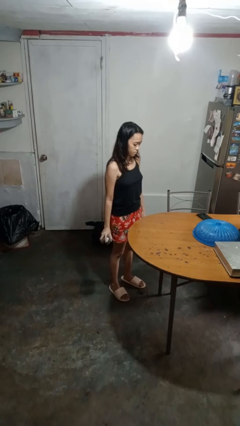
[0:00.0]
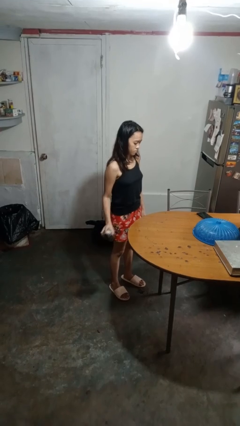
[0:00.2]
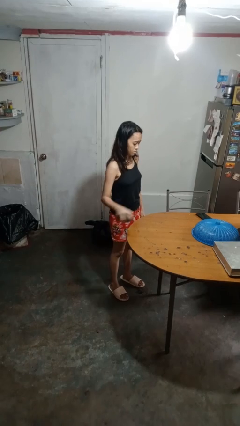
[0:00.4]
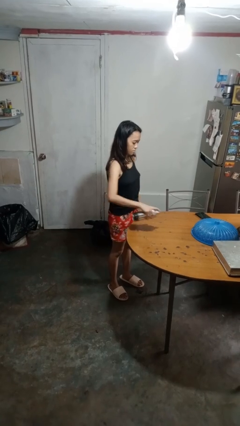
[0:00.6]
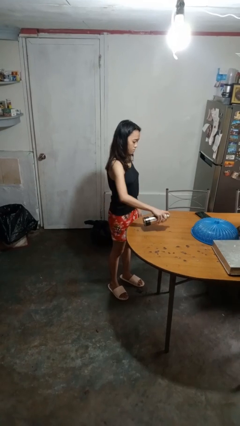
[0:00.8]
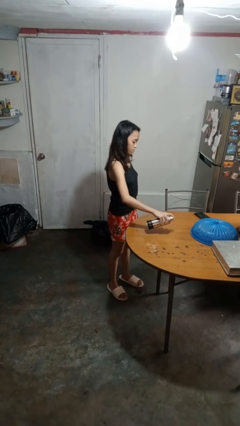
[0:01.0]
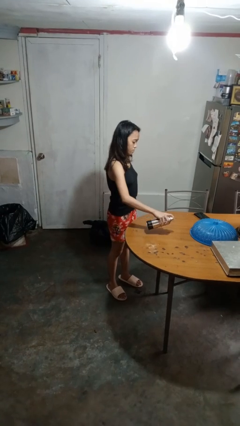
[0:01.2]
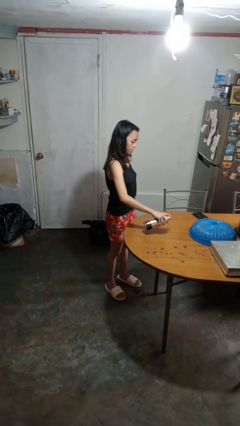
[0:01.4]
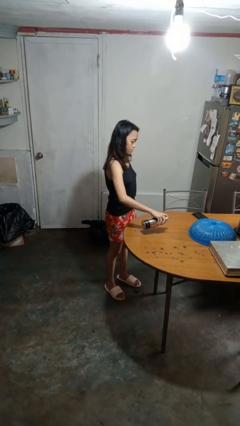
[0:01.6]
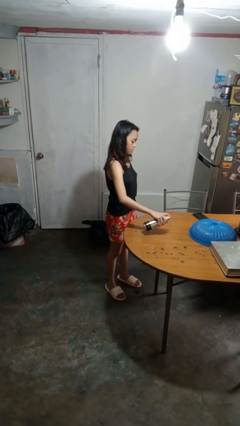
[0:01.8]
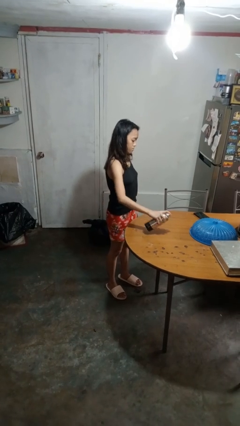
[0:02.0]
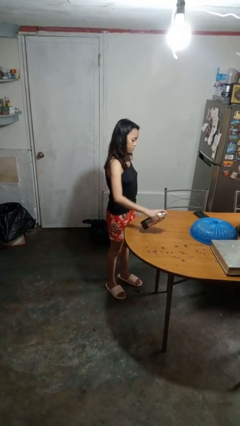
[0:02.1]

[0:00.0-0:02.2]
person sprays from bottle

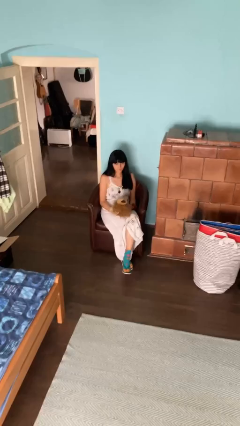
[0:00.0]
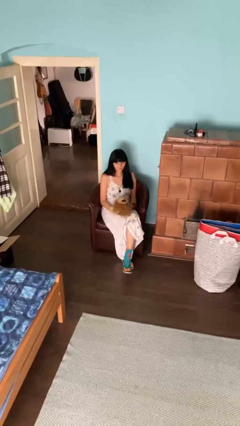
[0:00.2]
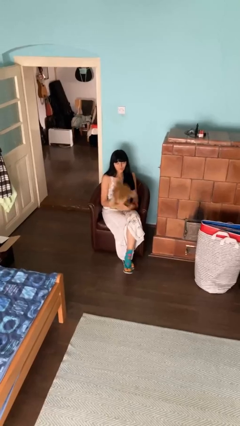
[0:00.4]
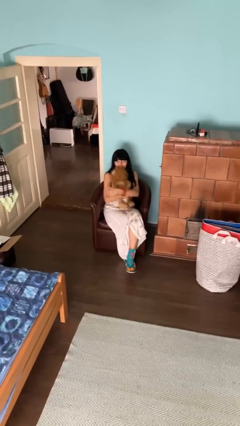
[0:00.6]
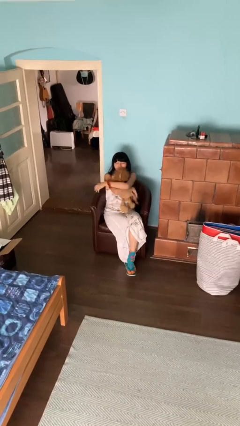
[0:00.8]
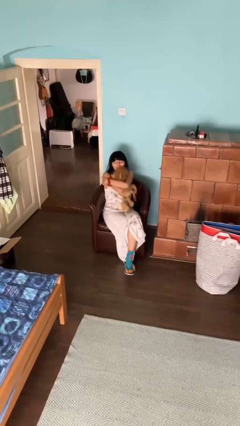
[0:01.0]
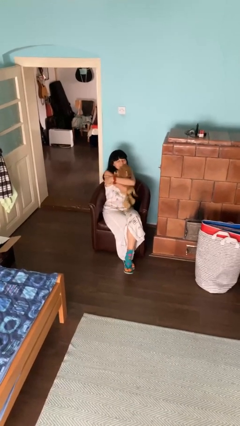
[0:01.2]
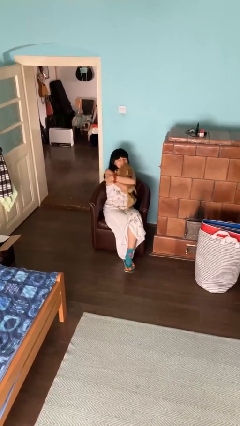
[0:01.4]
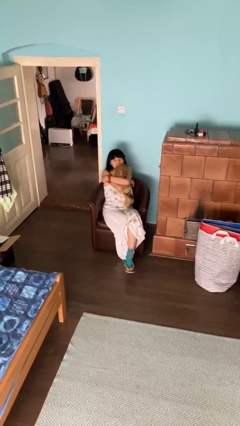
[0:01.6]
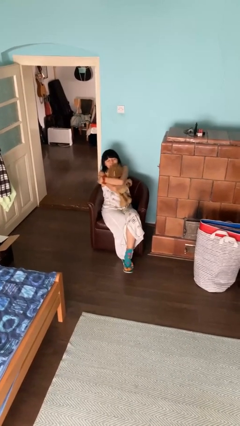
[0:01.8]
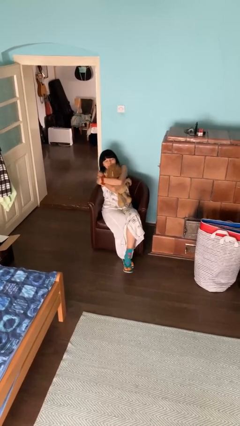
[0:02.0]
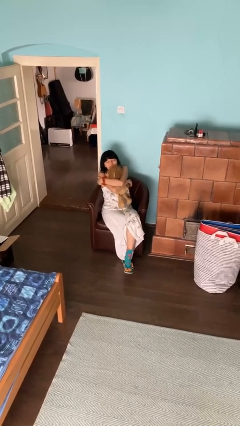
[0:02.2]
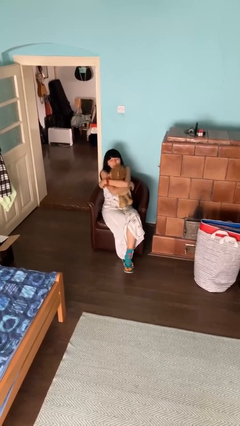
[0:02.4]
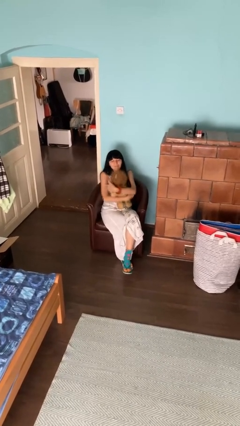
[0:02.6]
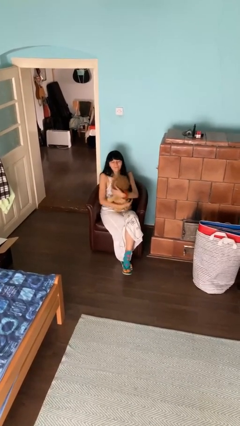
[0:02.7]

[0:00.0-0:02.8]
person hugs stuffed animal

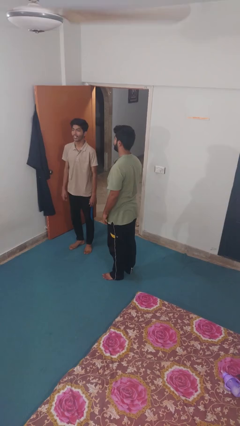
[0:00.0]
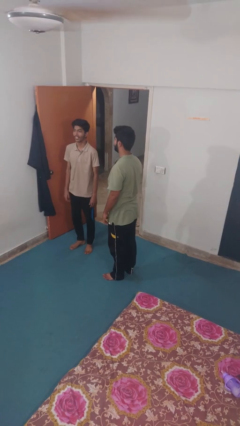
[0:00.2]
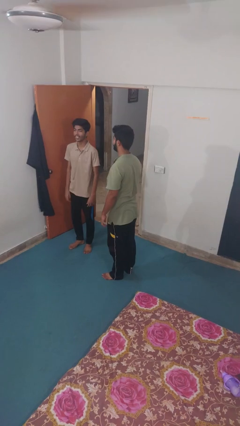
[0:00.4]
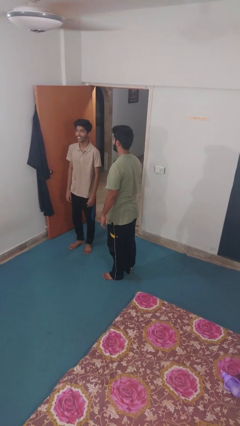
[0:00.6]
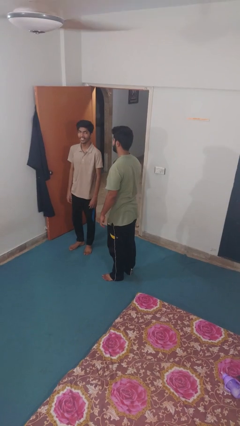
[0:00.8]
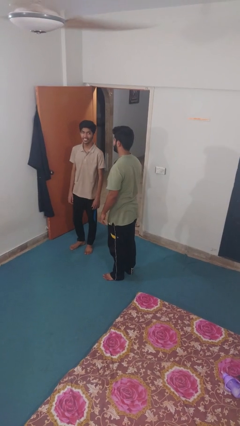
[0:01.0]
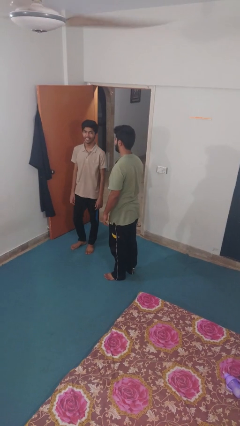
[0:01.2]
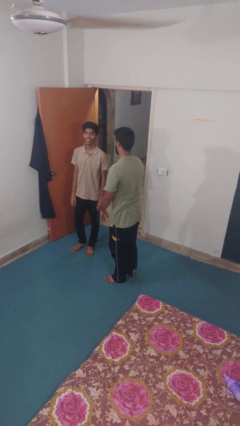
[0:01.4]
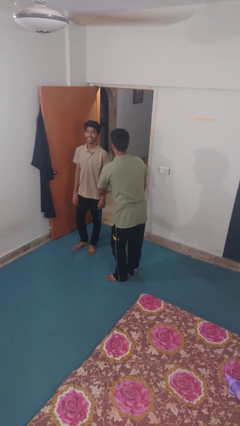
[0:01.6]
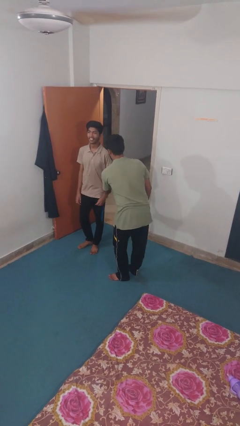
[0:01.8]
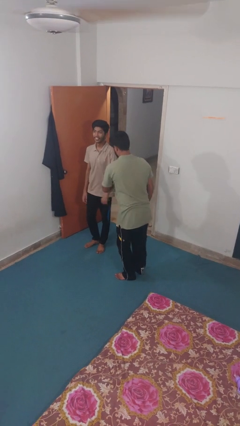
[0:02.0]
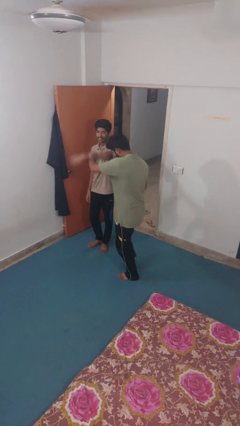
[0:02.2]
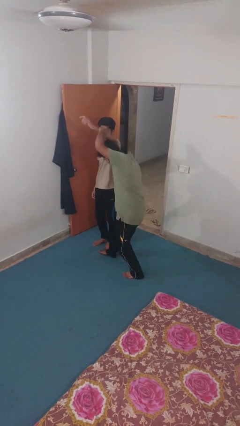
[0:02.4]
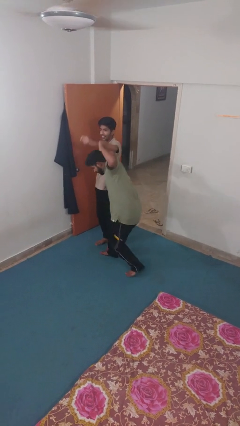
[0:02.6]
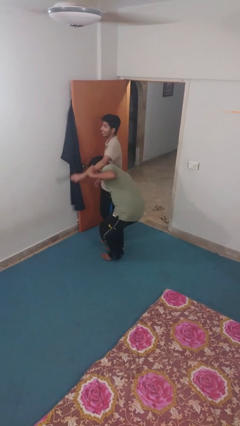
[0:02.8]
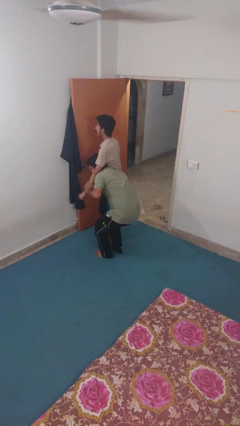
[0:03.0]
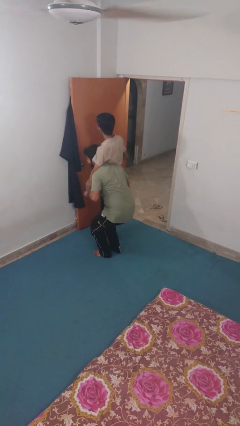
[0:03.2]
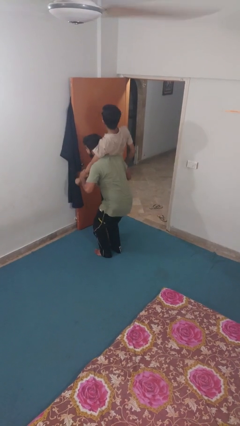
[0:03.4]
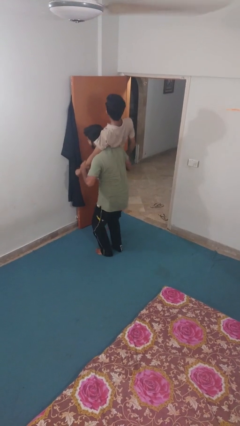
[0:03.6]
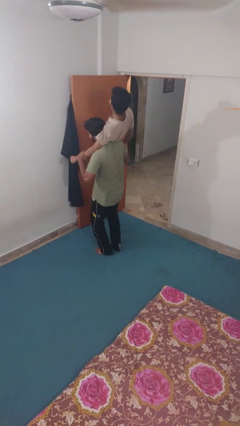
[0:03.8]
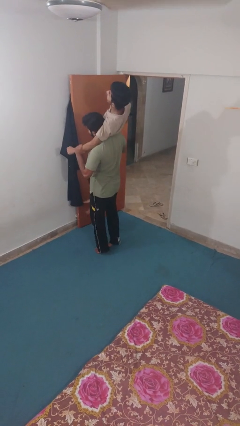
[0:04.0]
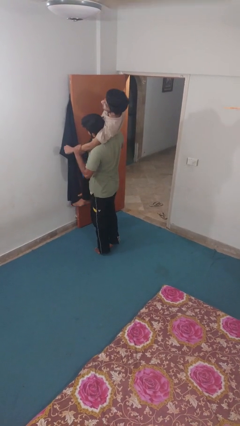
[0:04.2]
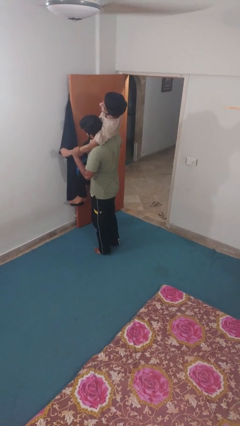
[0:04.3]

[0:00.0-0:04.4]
person carries person over shoulder

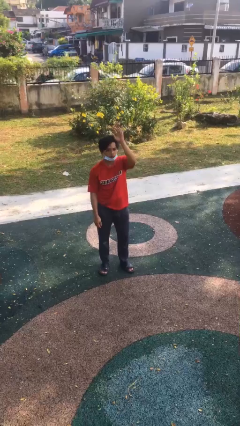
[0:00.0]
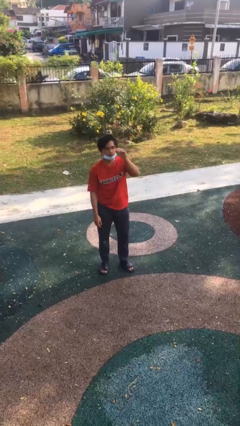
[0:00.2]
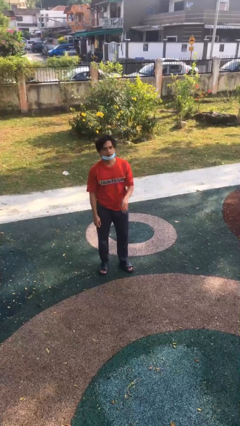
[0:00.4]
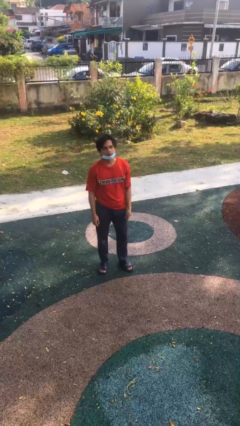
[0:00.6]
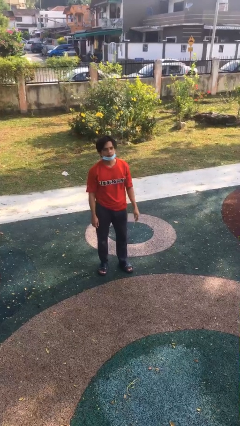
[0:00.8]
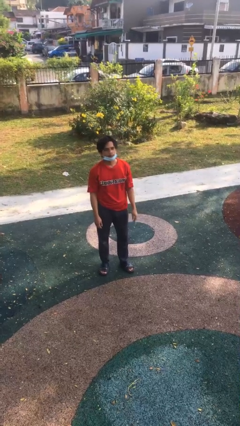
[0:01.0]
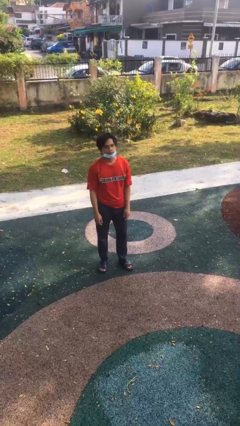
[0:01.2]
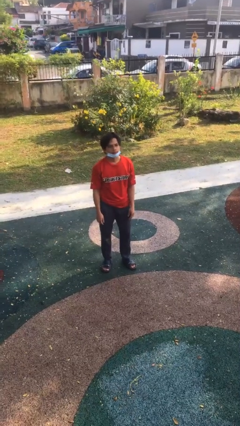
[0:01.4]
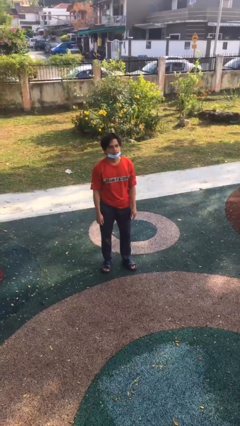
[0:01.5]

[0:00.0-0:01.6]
person gestures lower hand

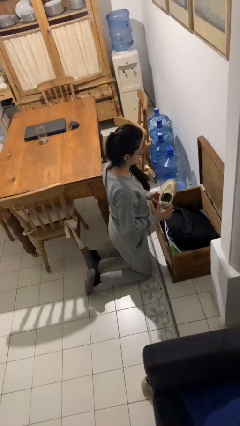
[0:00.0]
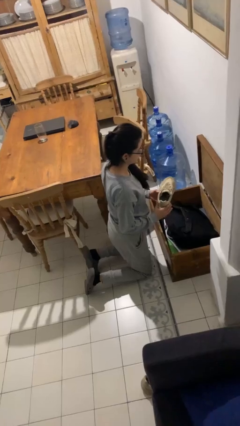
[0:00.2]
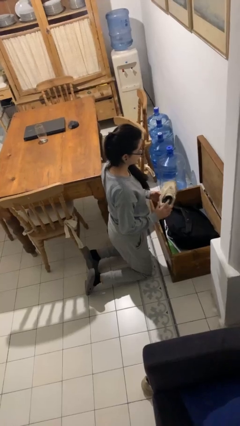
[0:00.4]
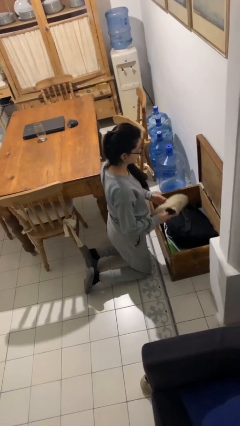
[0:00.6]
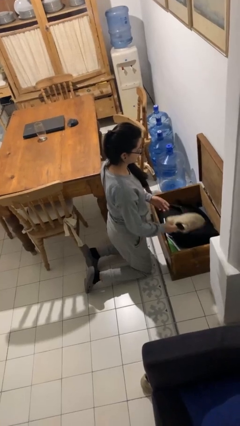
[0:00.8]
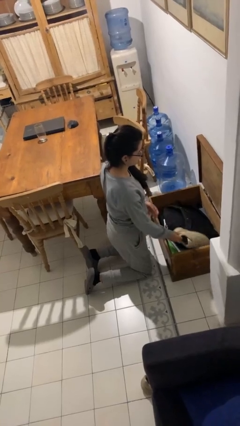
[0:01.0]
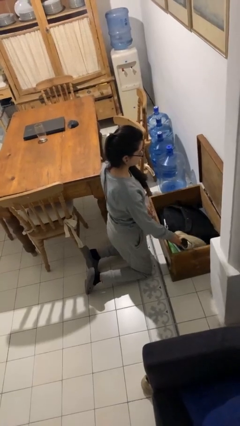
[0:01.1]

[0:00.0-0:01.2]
person puts object into box

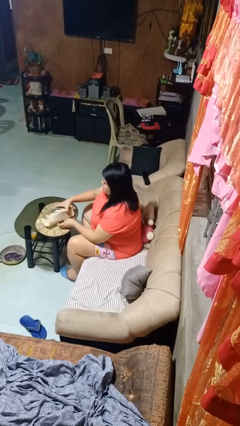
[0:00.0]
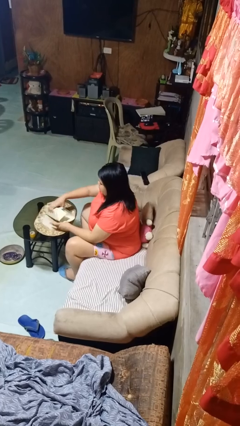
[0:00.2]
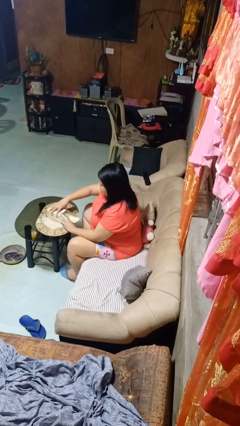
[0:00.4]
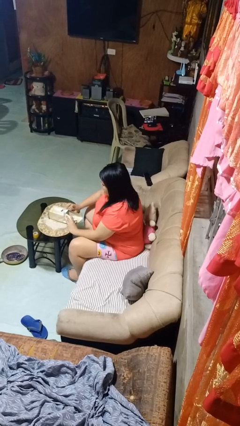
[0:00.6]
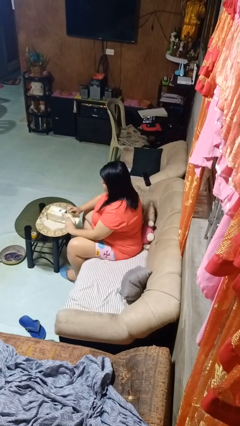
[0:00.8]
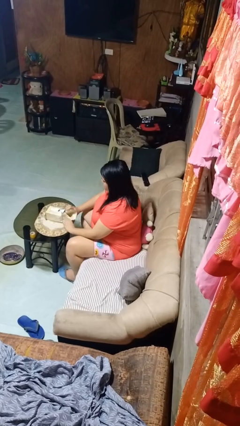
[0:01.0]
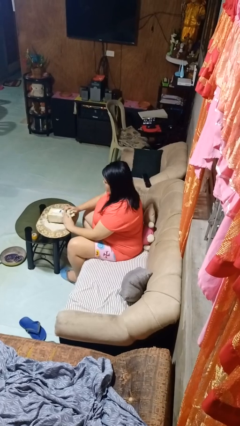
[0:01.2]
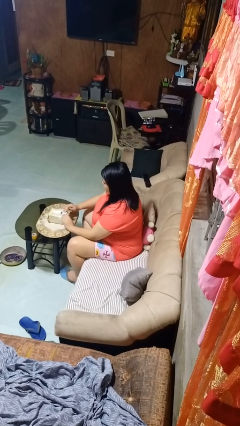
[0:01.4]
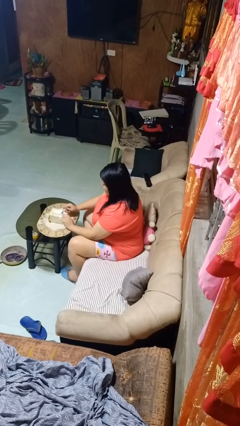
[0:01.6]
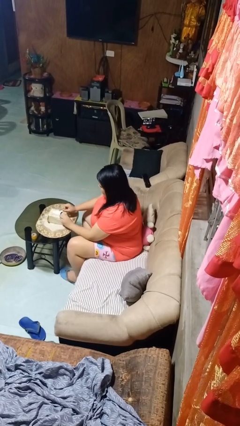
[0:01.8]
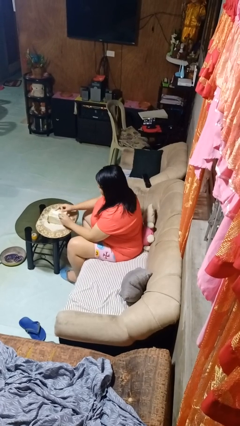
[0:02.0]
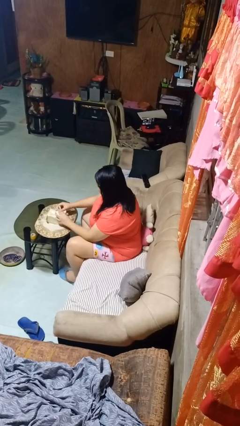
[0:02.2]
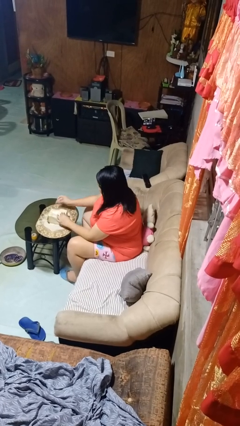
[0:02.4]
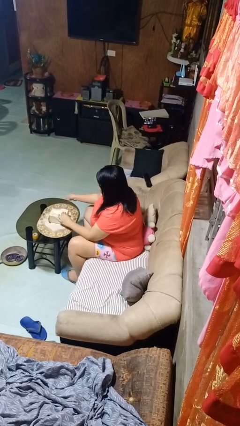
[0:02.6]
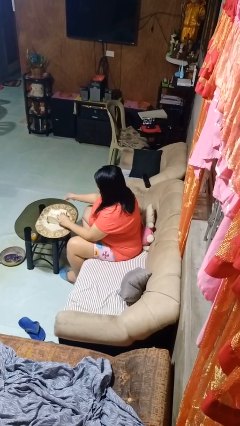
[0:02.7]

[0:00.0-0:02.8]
person wraps box

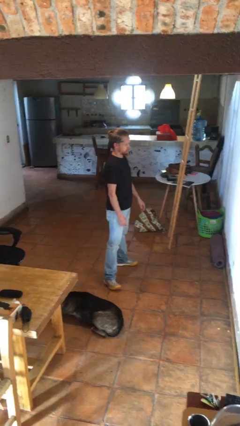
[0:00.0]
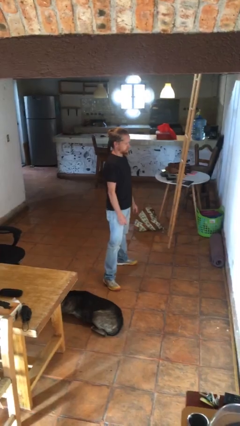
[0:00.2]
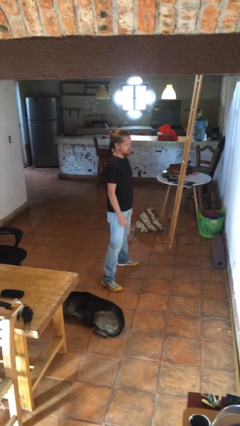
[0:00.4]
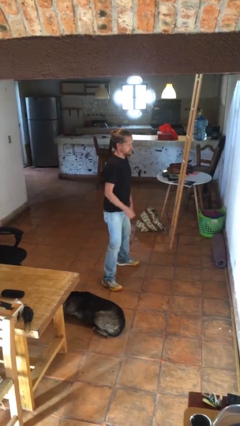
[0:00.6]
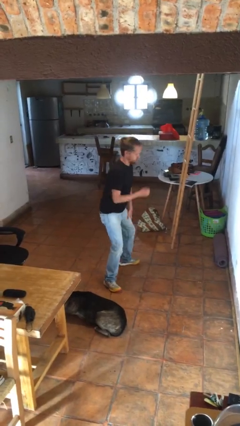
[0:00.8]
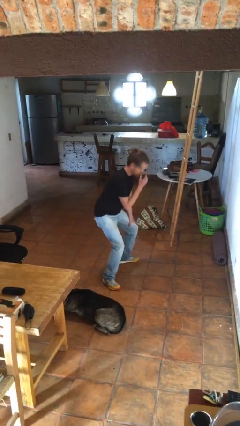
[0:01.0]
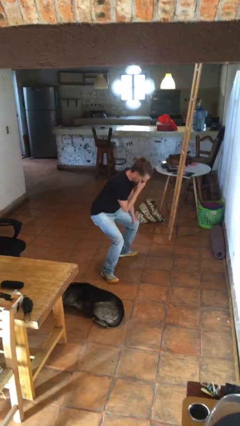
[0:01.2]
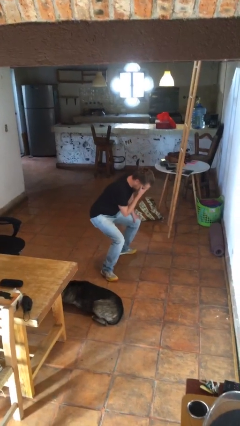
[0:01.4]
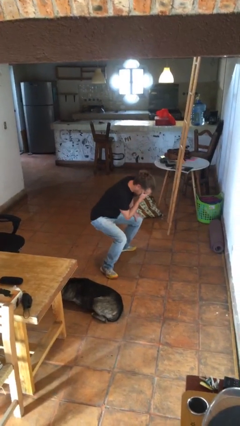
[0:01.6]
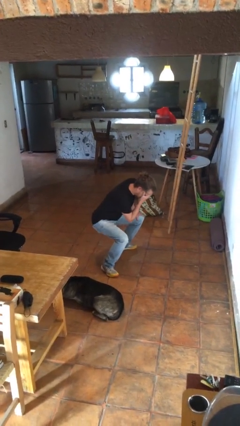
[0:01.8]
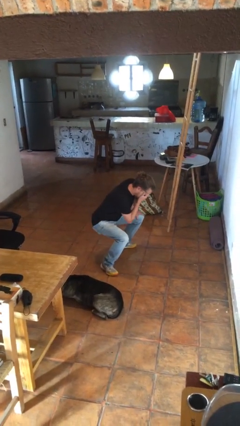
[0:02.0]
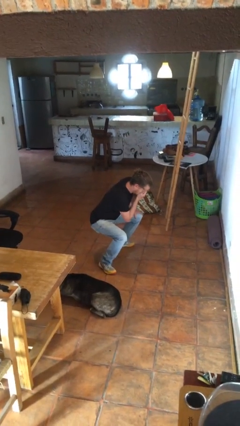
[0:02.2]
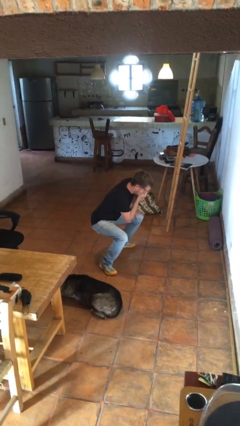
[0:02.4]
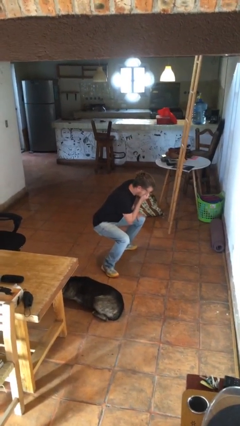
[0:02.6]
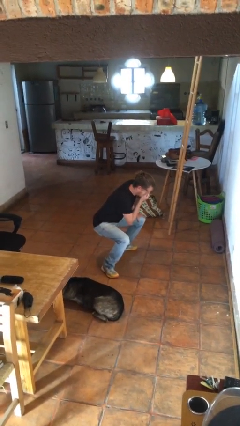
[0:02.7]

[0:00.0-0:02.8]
person squats
